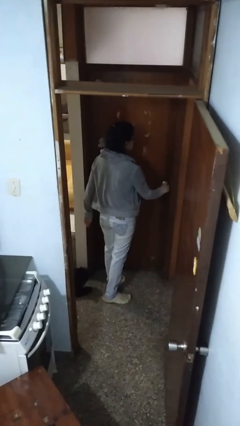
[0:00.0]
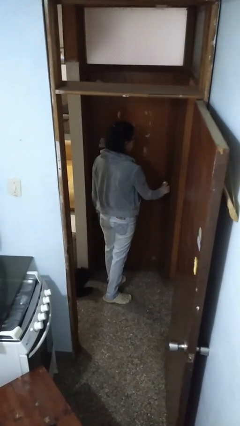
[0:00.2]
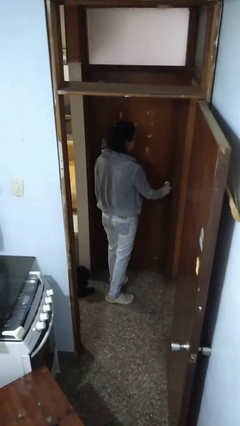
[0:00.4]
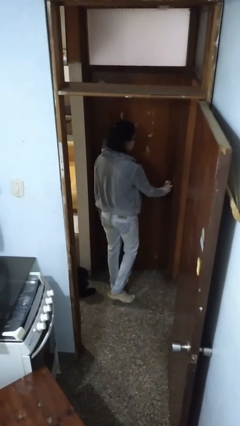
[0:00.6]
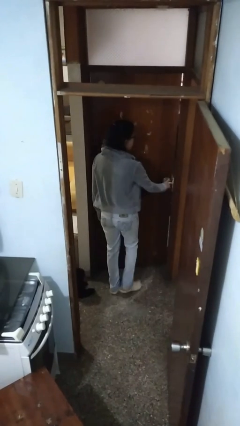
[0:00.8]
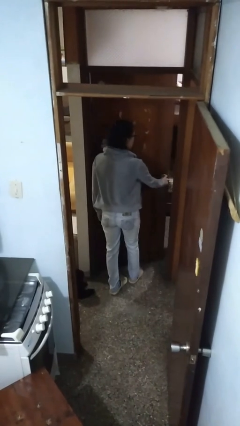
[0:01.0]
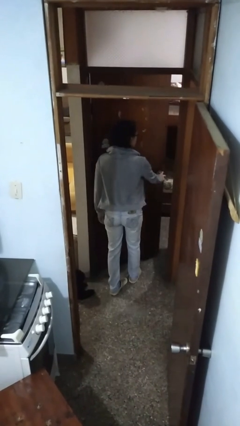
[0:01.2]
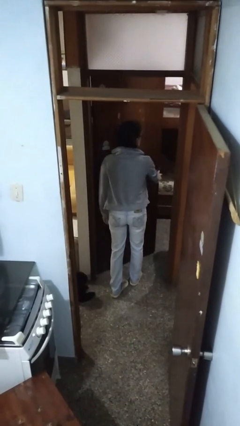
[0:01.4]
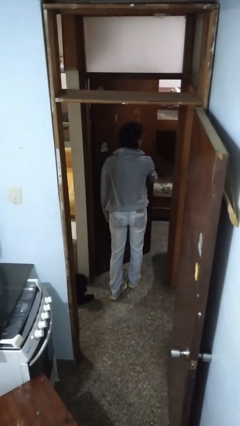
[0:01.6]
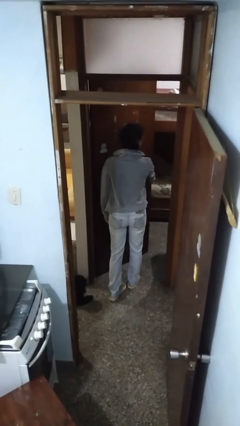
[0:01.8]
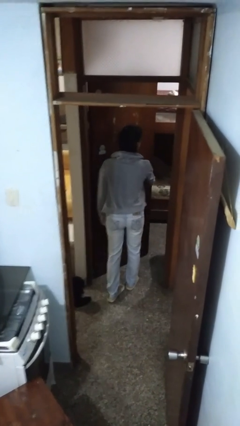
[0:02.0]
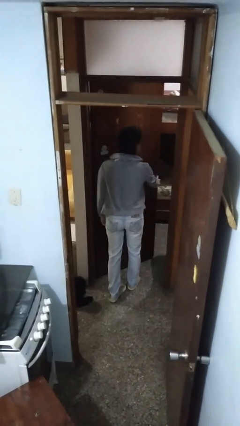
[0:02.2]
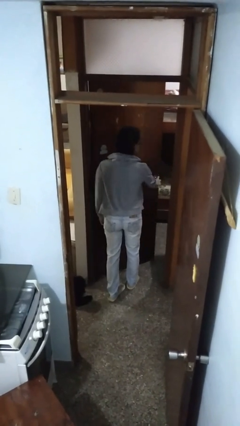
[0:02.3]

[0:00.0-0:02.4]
person opens facility door

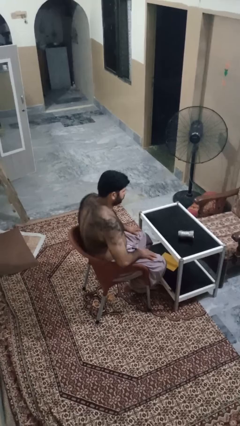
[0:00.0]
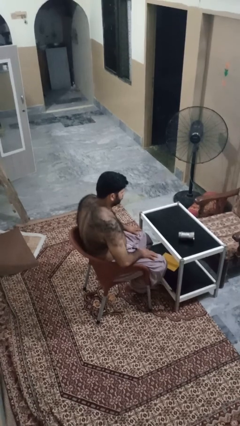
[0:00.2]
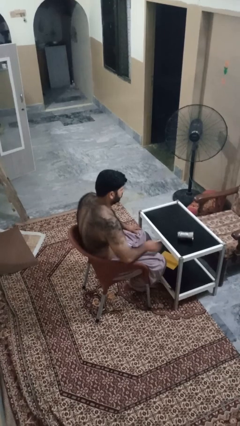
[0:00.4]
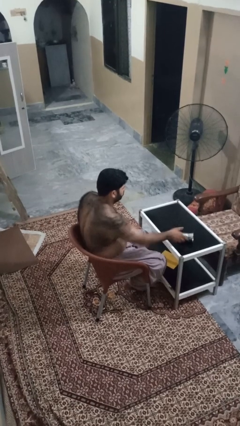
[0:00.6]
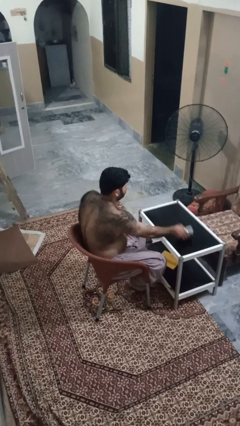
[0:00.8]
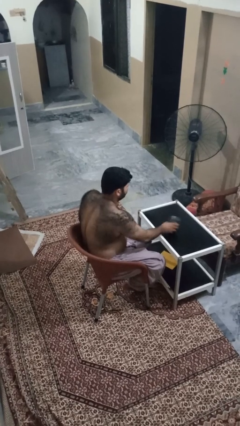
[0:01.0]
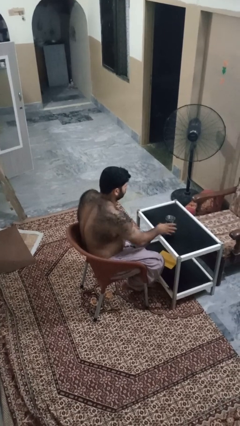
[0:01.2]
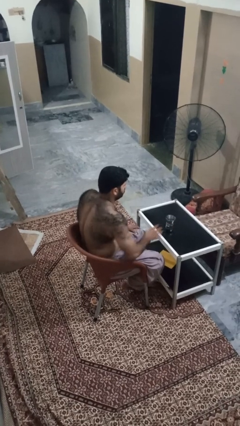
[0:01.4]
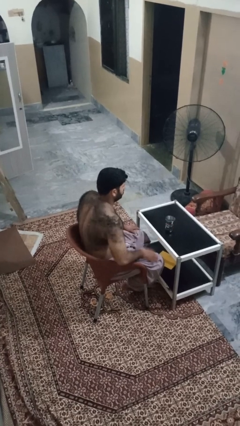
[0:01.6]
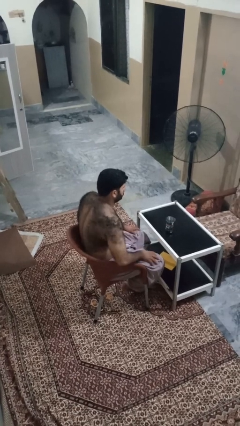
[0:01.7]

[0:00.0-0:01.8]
person sets upright glass

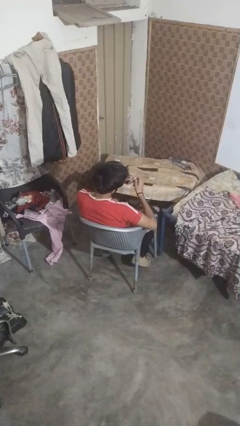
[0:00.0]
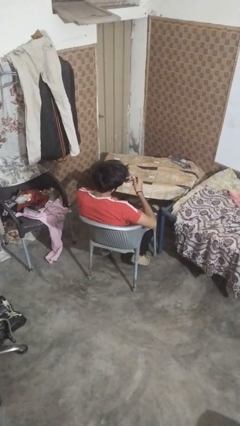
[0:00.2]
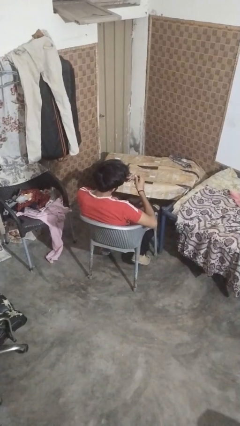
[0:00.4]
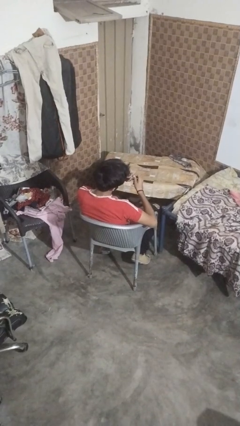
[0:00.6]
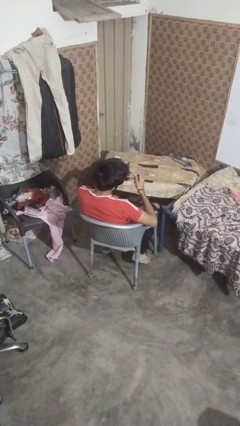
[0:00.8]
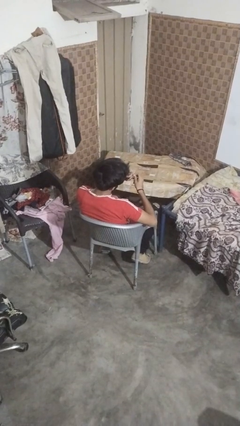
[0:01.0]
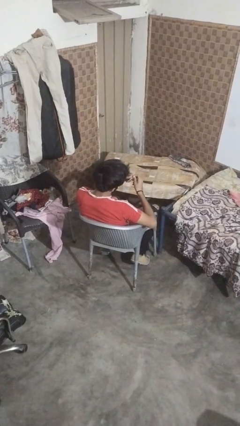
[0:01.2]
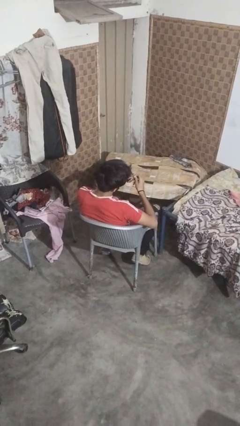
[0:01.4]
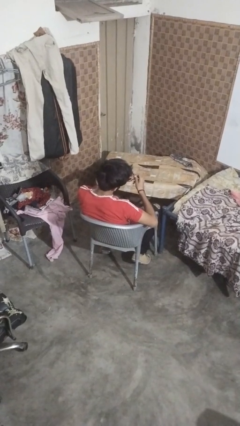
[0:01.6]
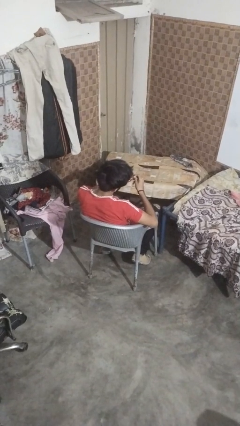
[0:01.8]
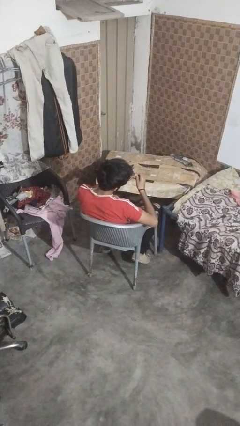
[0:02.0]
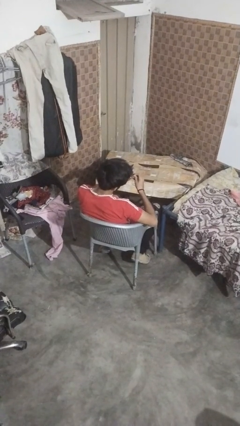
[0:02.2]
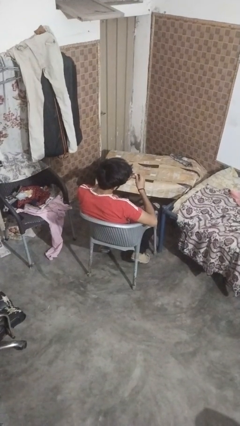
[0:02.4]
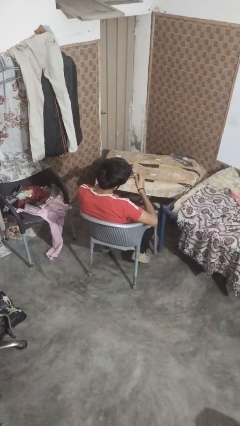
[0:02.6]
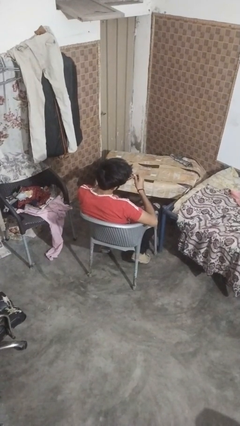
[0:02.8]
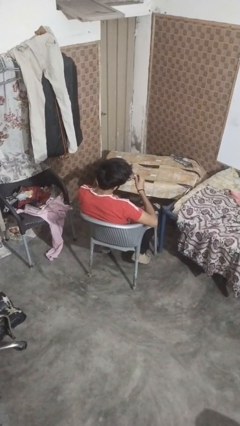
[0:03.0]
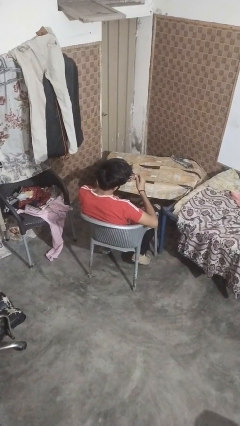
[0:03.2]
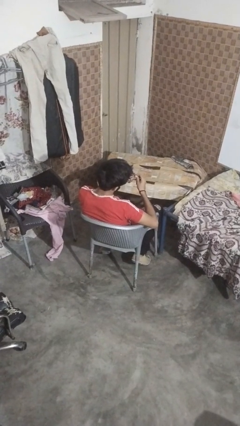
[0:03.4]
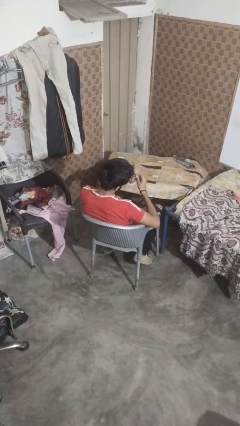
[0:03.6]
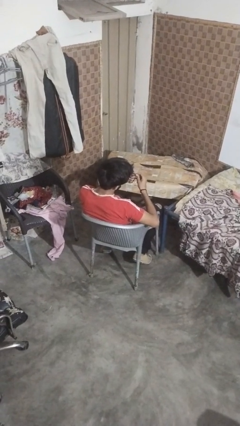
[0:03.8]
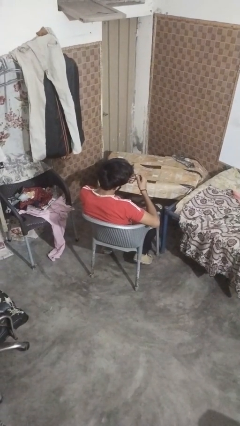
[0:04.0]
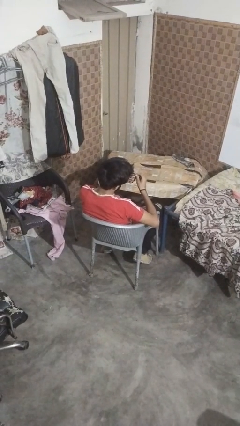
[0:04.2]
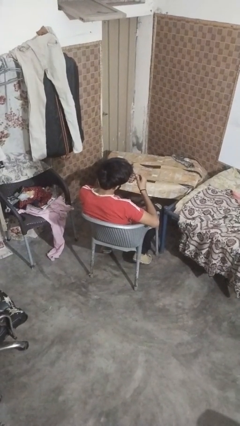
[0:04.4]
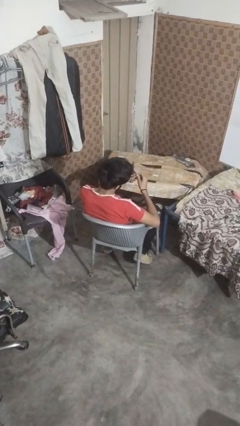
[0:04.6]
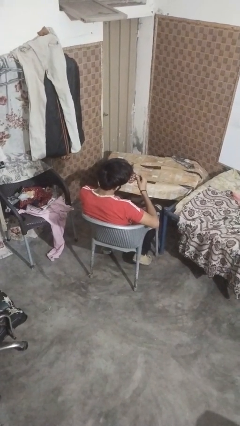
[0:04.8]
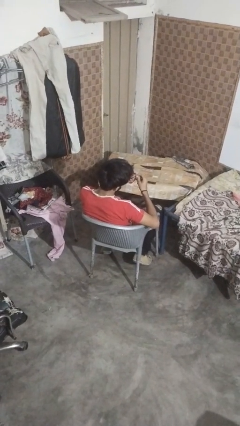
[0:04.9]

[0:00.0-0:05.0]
person files fingernails

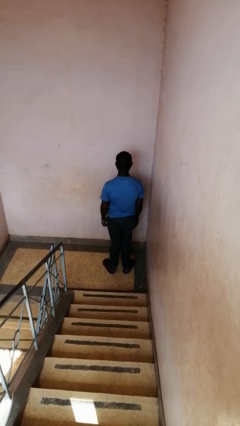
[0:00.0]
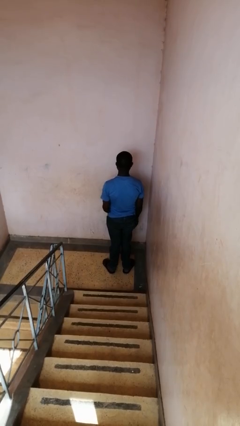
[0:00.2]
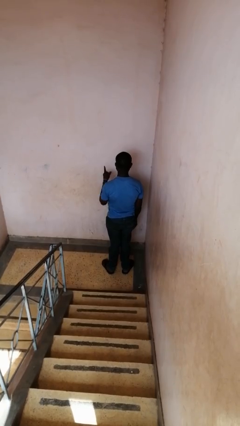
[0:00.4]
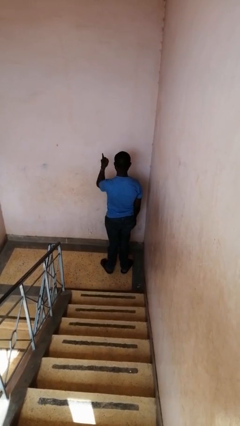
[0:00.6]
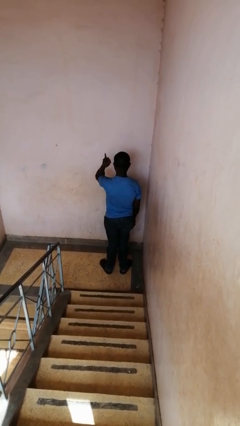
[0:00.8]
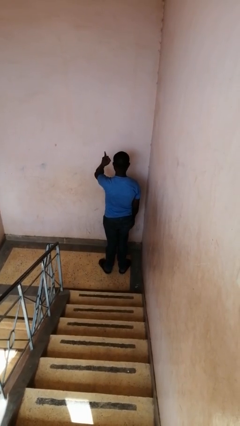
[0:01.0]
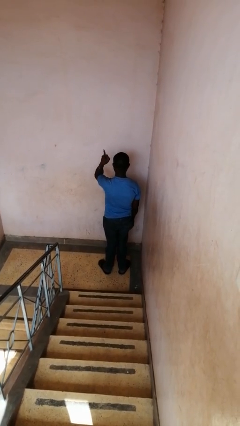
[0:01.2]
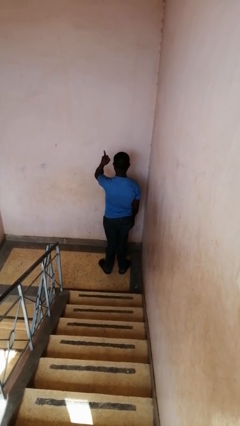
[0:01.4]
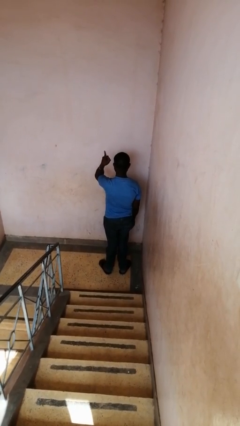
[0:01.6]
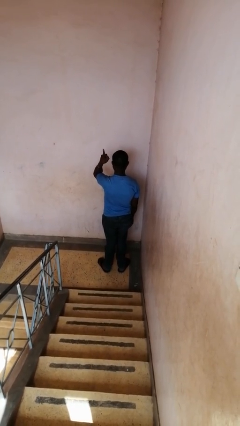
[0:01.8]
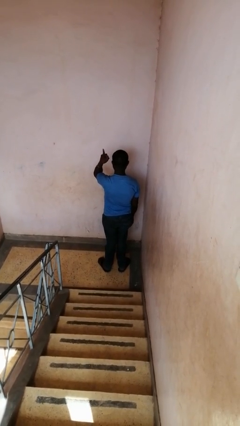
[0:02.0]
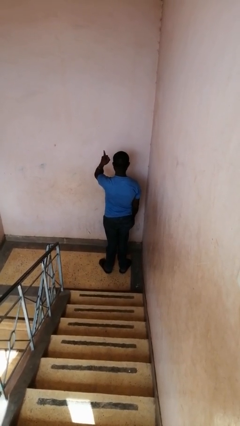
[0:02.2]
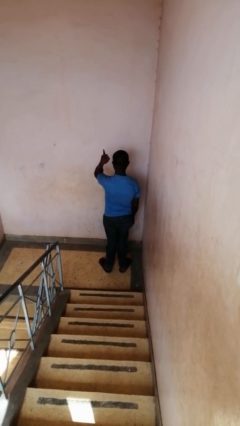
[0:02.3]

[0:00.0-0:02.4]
person gestures number one

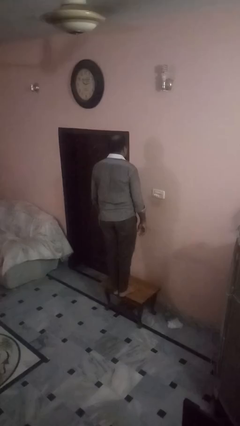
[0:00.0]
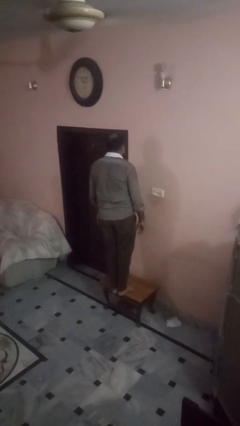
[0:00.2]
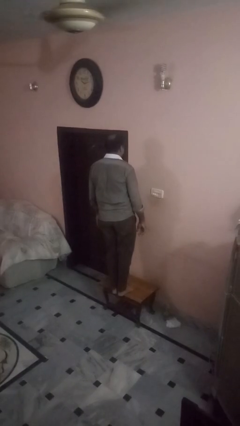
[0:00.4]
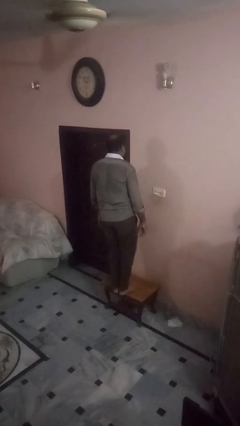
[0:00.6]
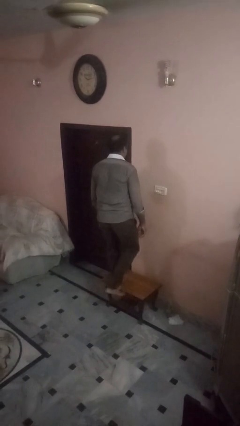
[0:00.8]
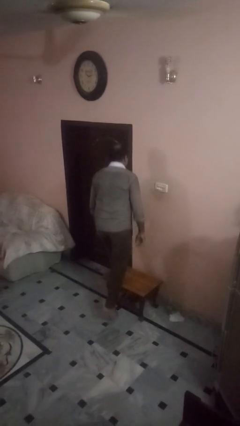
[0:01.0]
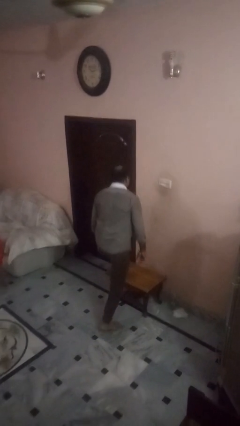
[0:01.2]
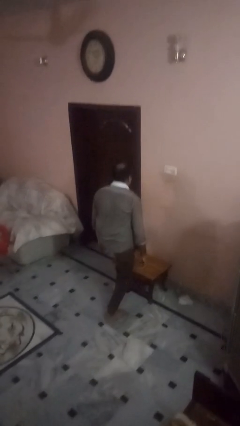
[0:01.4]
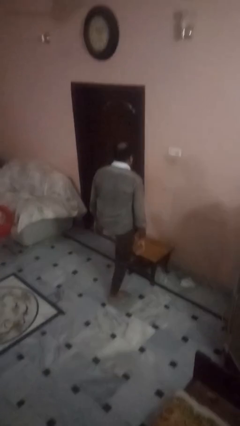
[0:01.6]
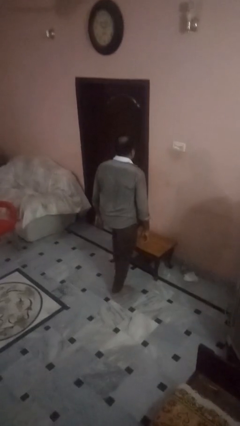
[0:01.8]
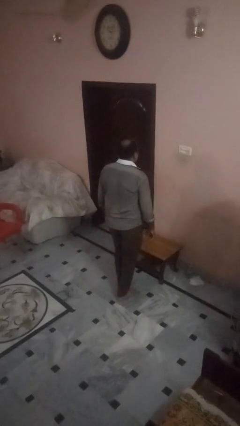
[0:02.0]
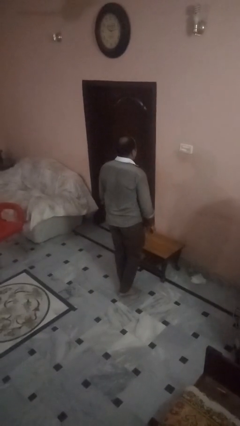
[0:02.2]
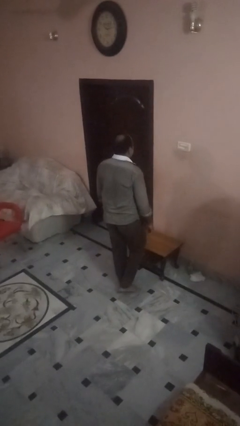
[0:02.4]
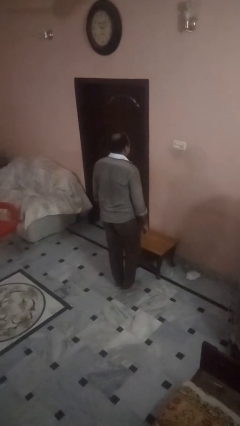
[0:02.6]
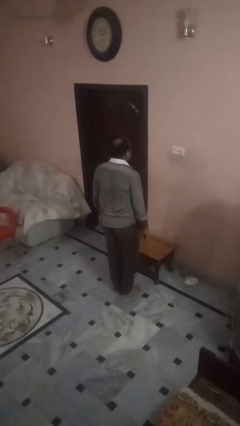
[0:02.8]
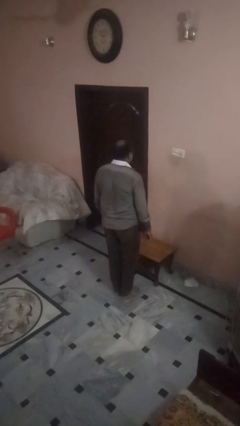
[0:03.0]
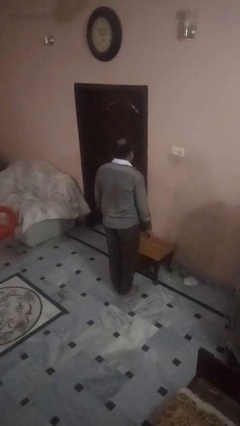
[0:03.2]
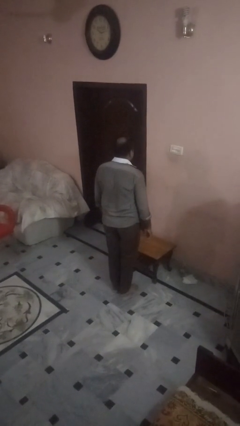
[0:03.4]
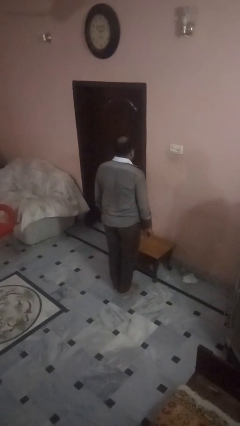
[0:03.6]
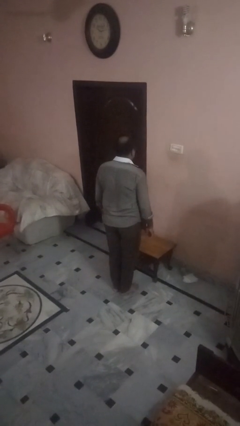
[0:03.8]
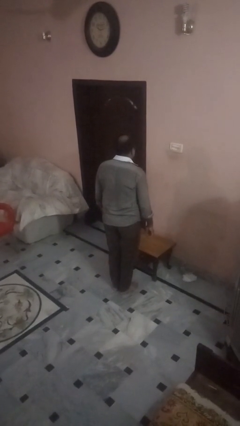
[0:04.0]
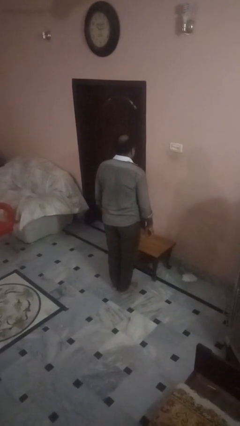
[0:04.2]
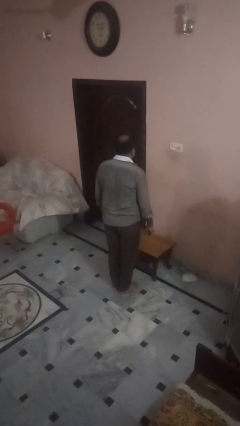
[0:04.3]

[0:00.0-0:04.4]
person climbs off table

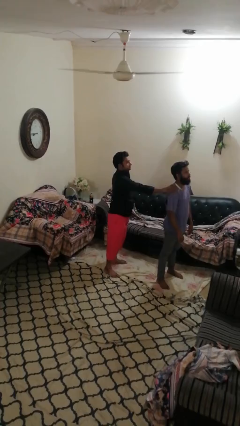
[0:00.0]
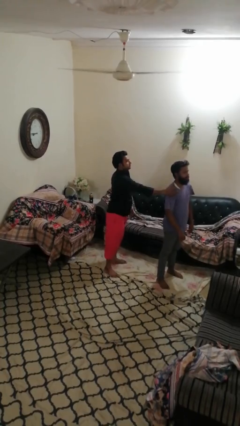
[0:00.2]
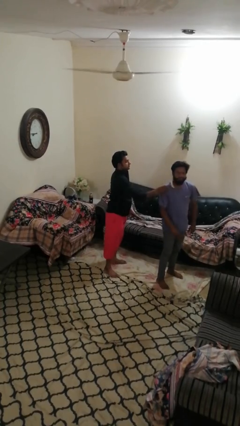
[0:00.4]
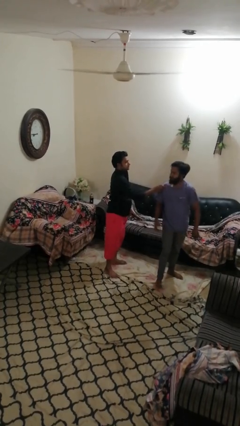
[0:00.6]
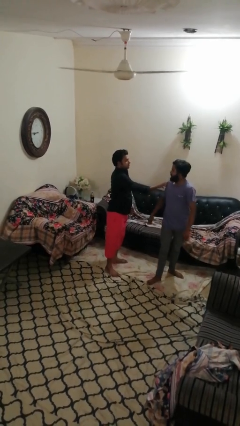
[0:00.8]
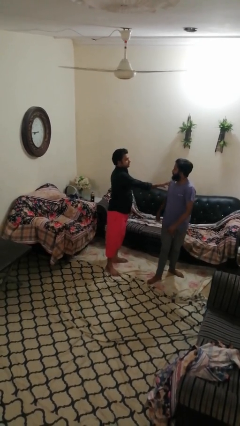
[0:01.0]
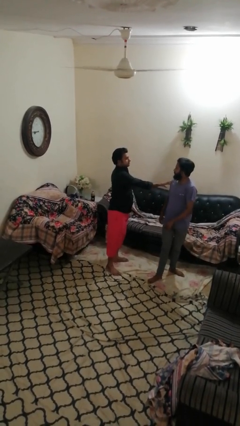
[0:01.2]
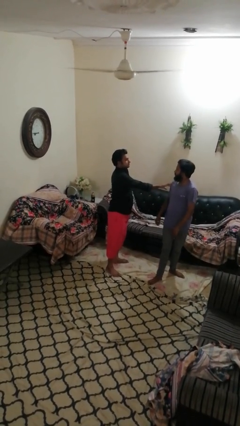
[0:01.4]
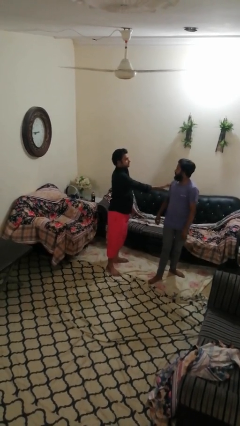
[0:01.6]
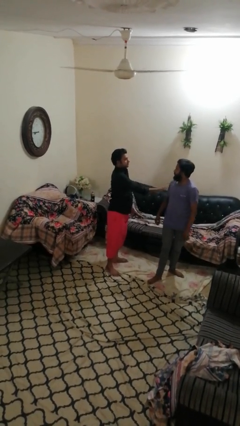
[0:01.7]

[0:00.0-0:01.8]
person spins person around
